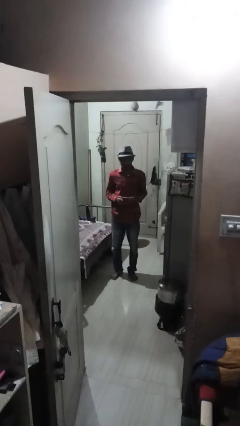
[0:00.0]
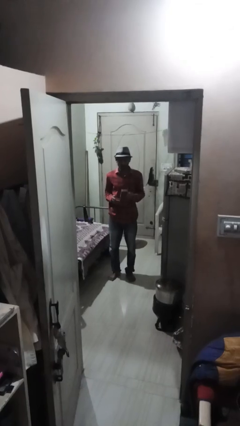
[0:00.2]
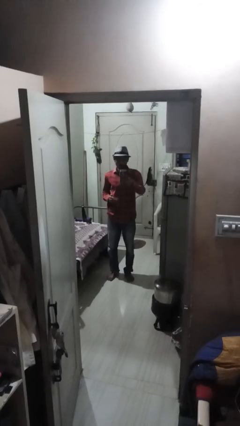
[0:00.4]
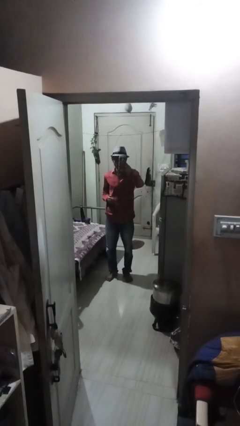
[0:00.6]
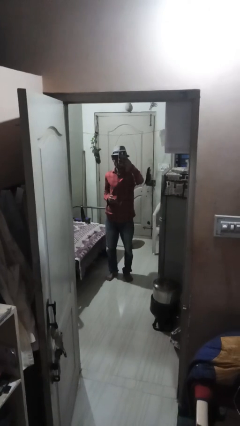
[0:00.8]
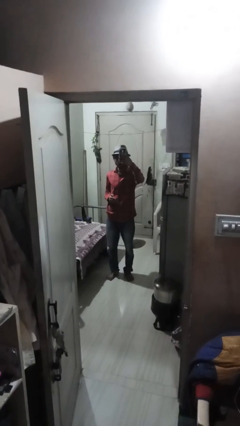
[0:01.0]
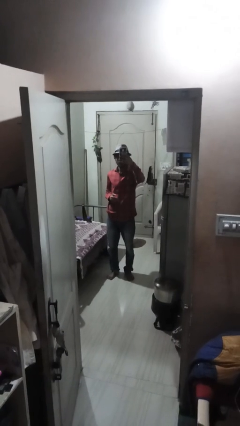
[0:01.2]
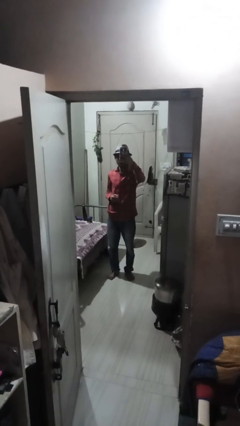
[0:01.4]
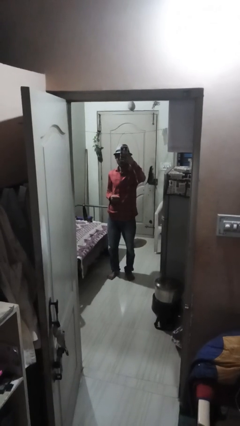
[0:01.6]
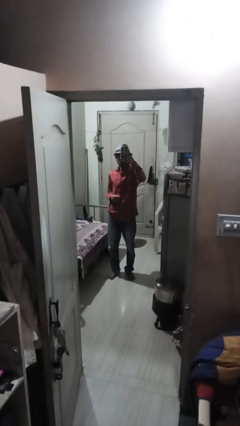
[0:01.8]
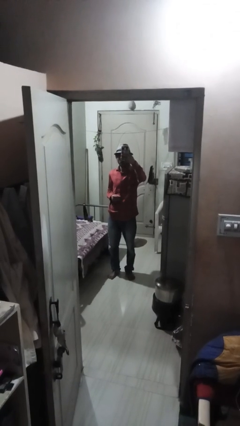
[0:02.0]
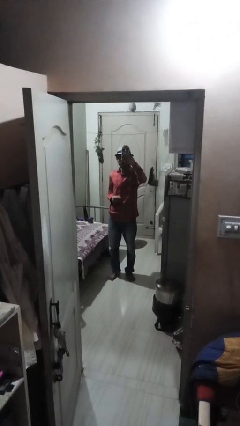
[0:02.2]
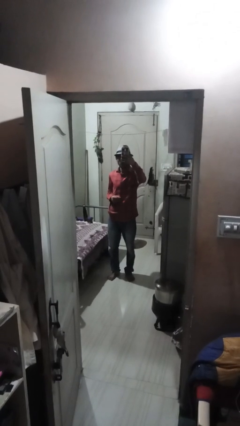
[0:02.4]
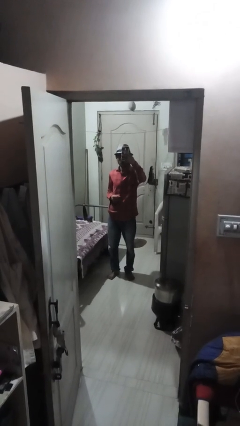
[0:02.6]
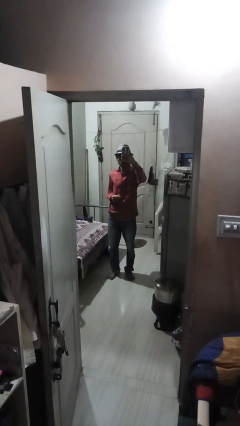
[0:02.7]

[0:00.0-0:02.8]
person takes selfie

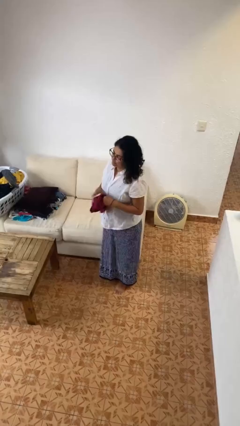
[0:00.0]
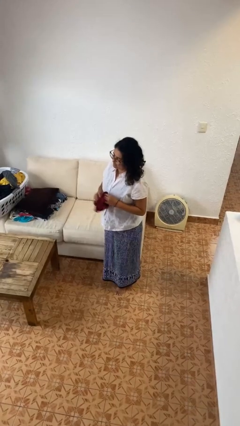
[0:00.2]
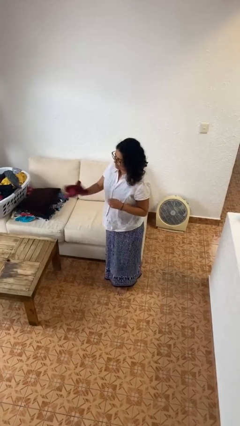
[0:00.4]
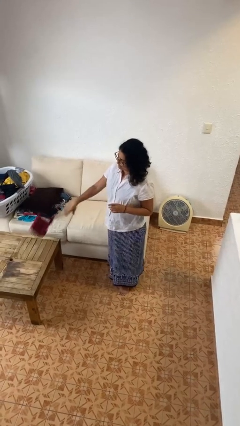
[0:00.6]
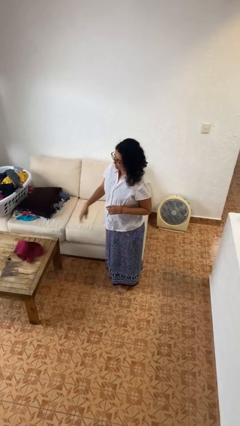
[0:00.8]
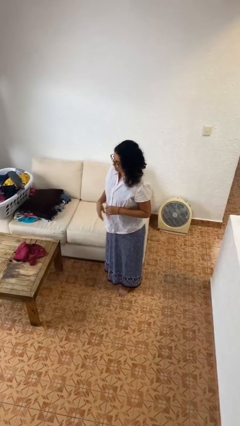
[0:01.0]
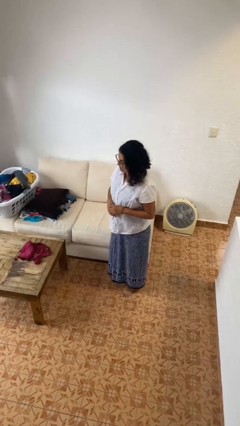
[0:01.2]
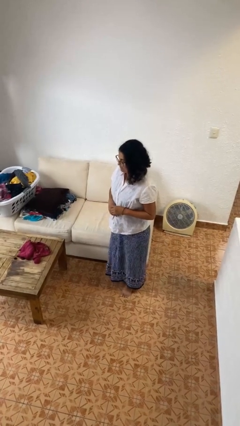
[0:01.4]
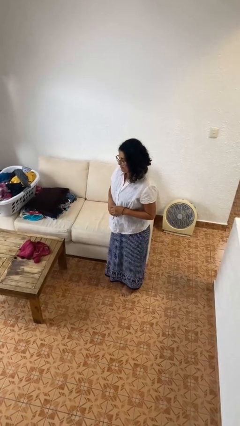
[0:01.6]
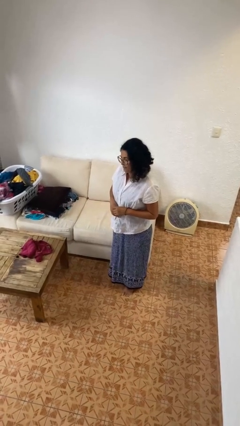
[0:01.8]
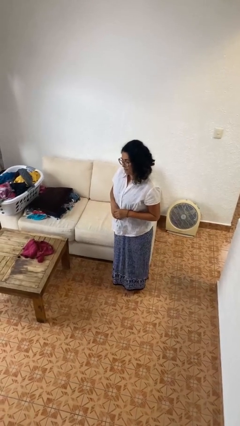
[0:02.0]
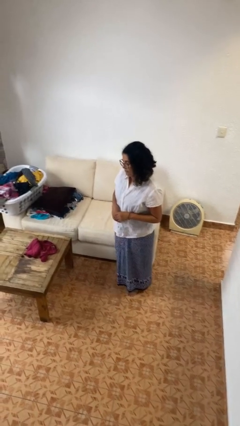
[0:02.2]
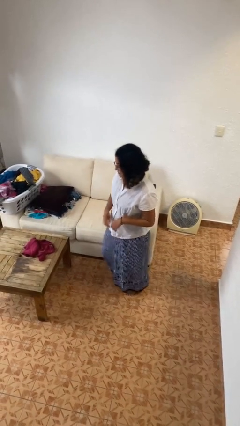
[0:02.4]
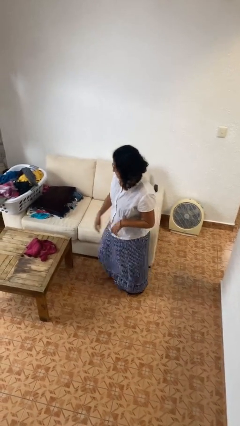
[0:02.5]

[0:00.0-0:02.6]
person throws object on table

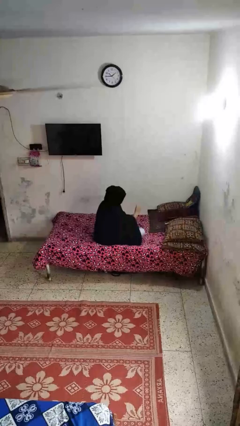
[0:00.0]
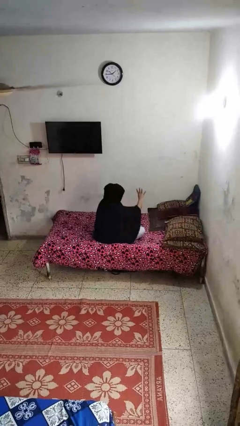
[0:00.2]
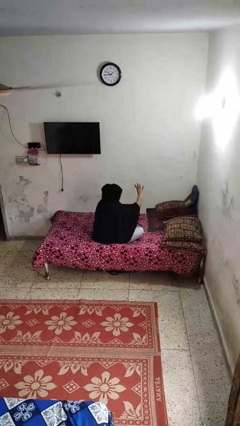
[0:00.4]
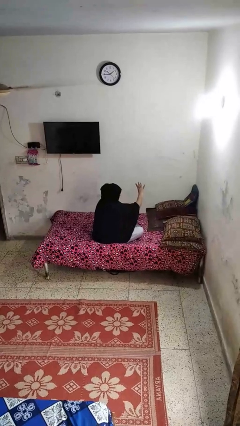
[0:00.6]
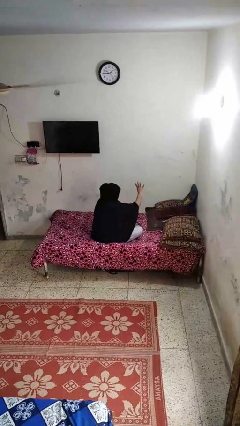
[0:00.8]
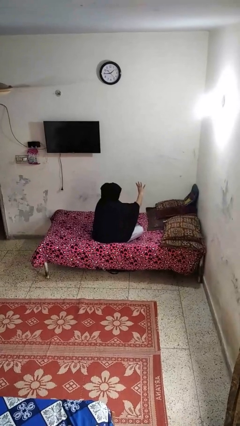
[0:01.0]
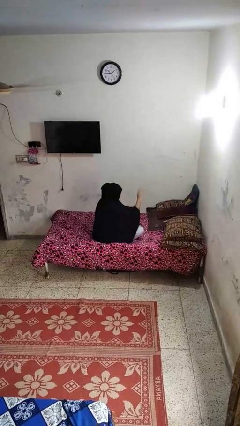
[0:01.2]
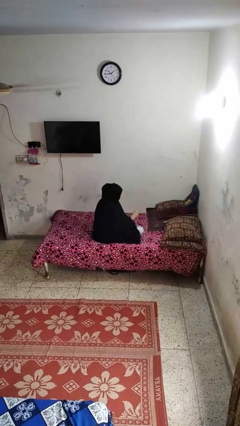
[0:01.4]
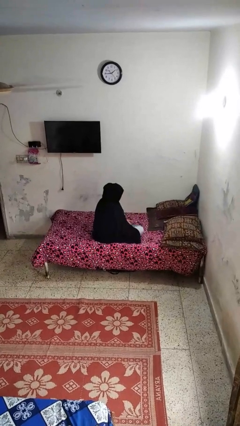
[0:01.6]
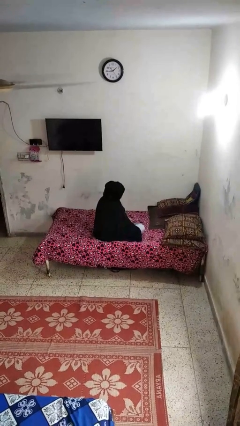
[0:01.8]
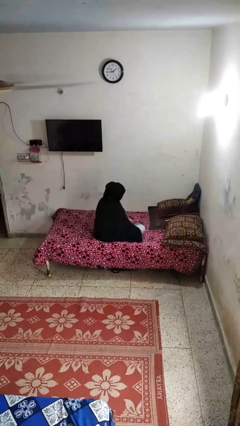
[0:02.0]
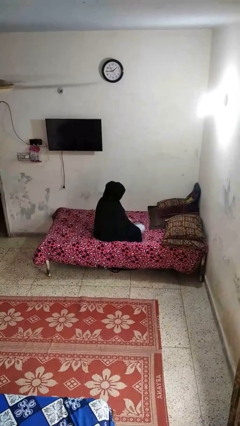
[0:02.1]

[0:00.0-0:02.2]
person gestures number four

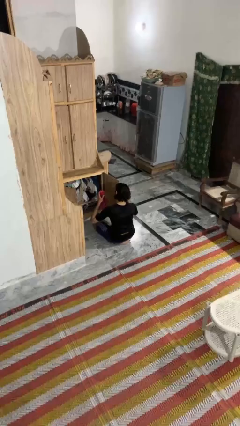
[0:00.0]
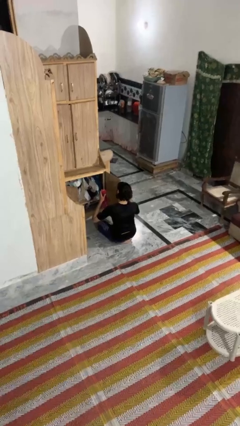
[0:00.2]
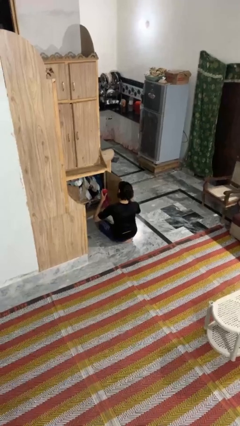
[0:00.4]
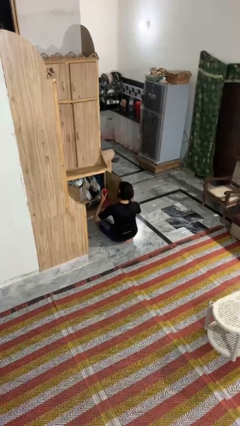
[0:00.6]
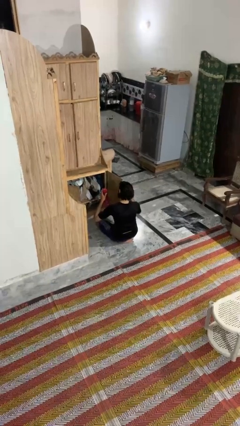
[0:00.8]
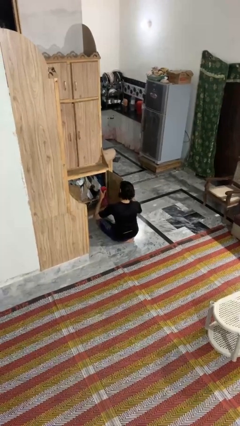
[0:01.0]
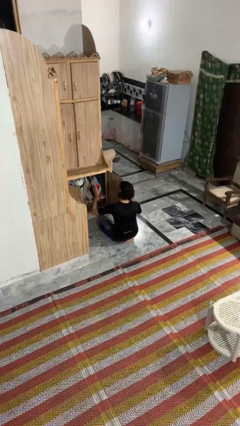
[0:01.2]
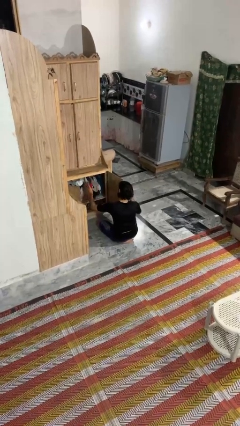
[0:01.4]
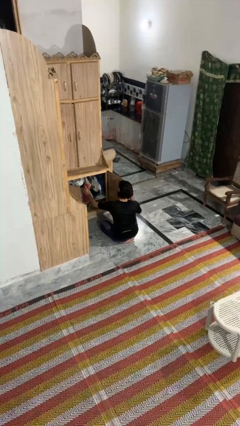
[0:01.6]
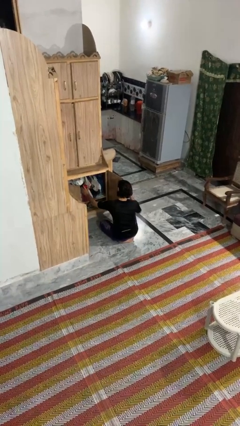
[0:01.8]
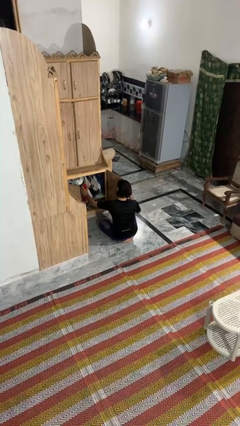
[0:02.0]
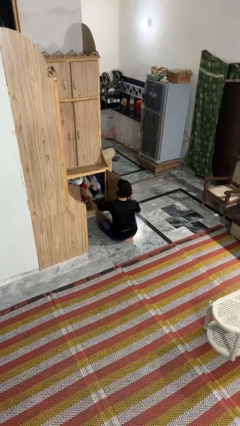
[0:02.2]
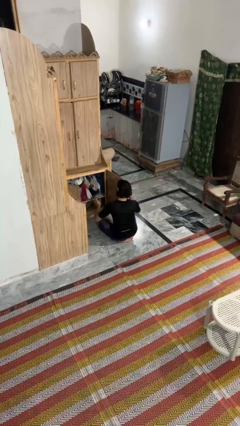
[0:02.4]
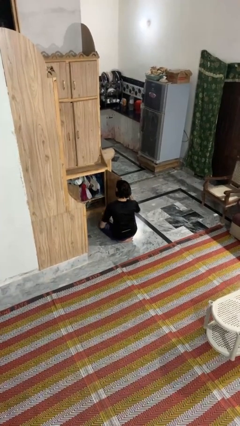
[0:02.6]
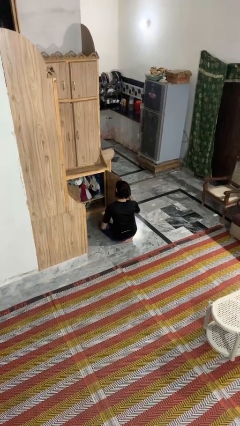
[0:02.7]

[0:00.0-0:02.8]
person puts down object into cabinet

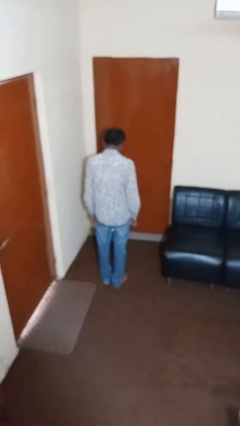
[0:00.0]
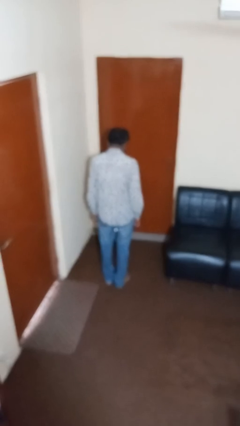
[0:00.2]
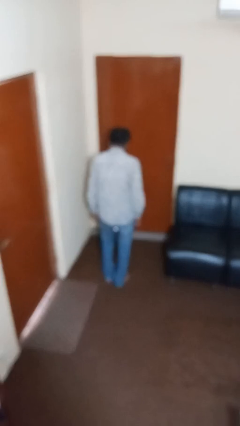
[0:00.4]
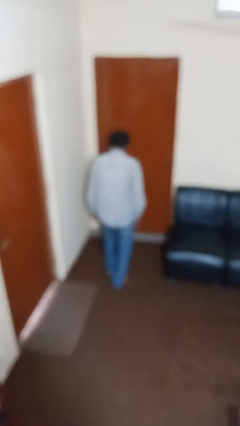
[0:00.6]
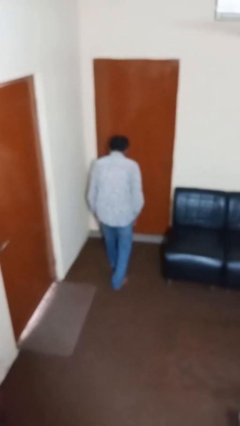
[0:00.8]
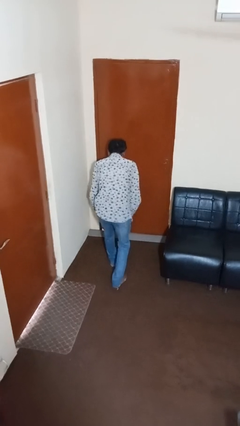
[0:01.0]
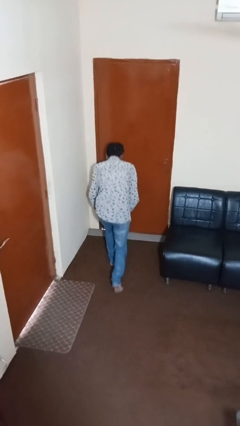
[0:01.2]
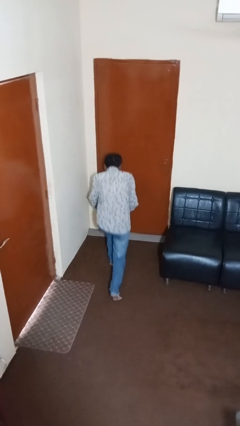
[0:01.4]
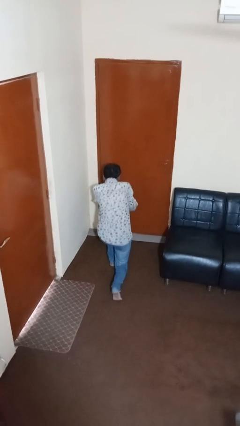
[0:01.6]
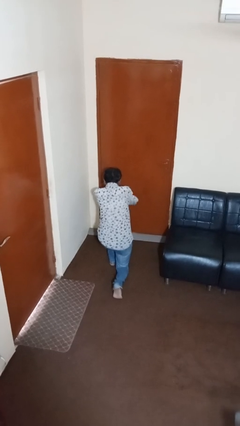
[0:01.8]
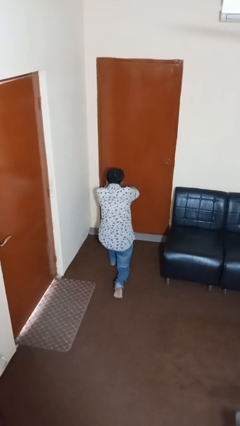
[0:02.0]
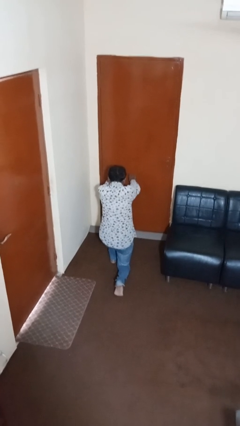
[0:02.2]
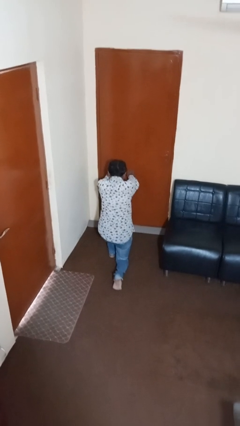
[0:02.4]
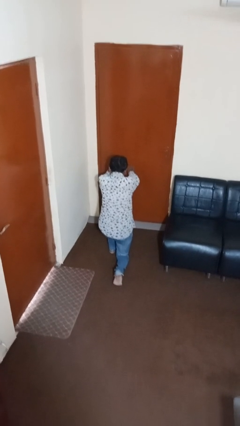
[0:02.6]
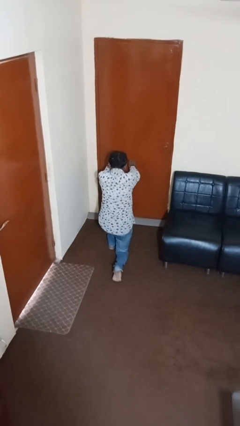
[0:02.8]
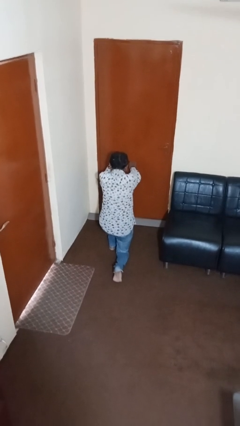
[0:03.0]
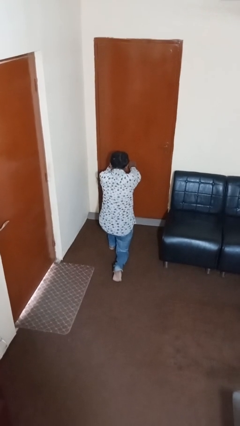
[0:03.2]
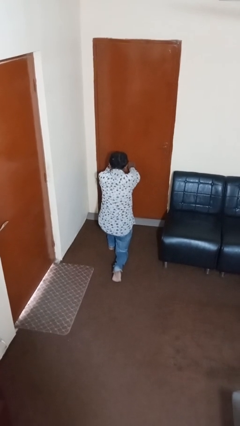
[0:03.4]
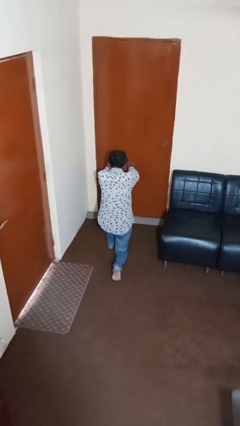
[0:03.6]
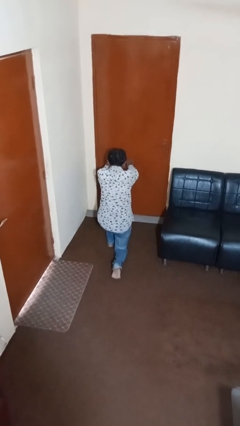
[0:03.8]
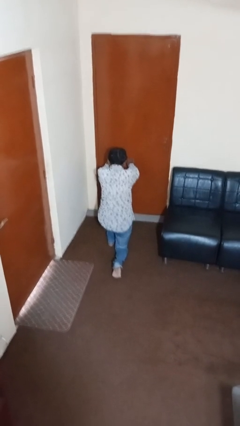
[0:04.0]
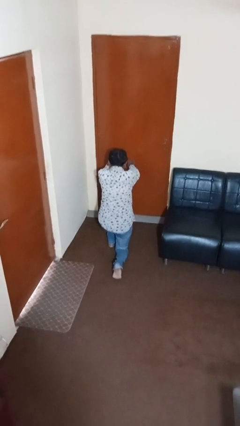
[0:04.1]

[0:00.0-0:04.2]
person exercises with lunges

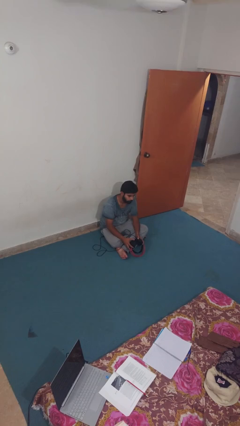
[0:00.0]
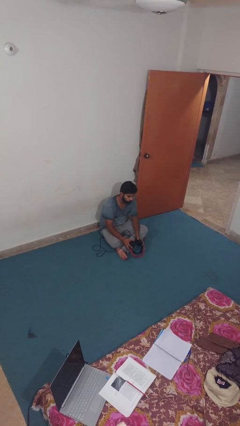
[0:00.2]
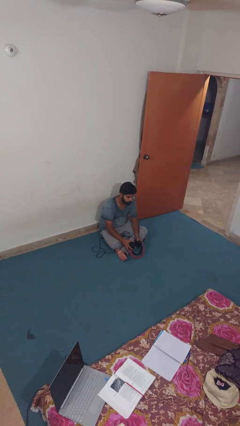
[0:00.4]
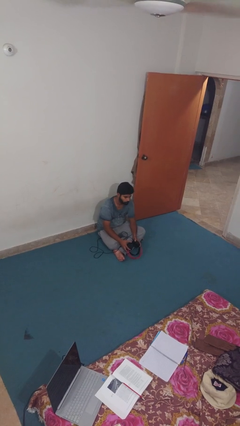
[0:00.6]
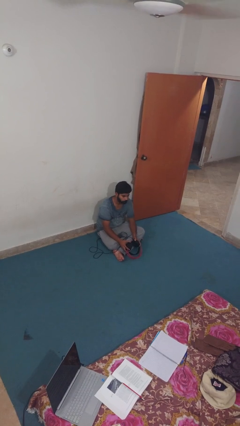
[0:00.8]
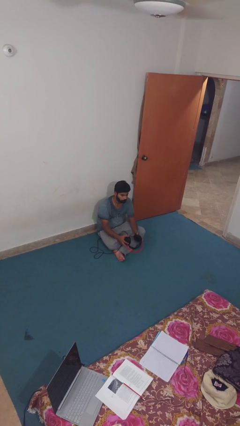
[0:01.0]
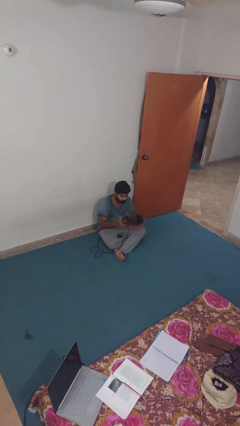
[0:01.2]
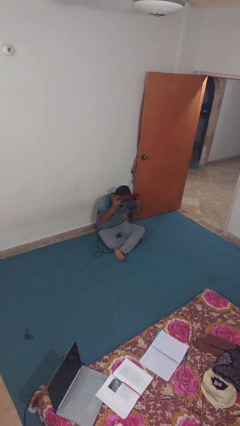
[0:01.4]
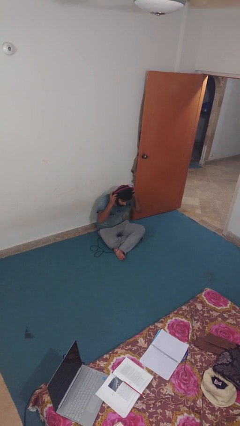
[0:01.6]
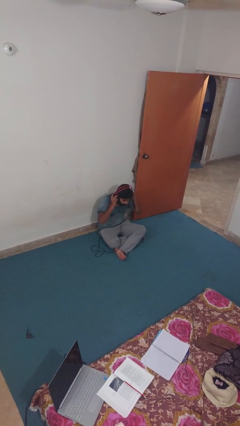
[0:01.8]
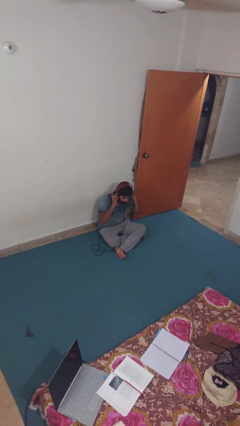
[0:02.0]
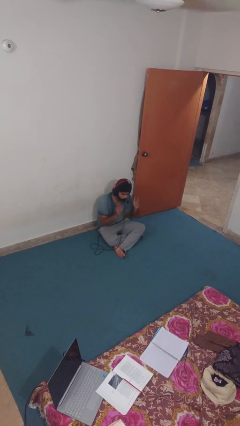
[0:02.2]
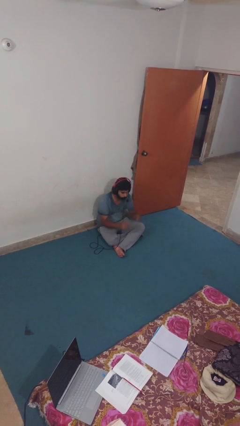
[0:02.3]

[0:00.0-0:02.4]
person puts on headphones

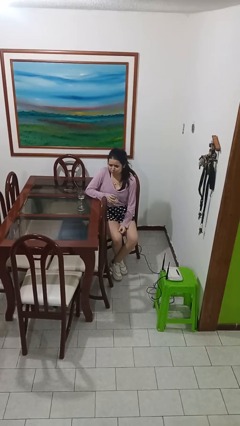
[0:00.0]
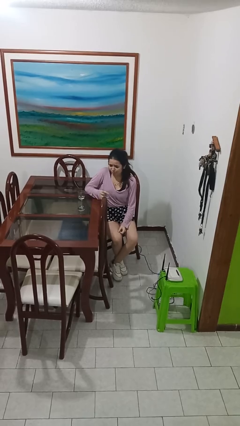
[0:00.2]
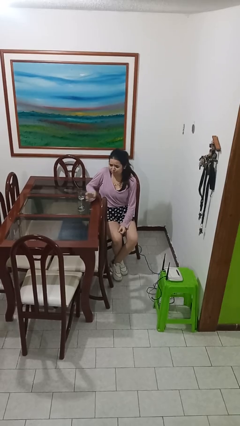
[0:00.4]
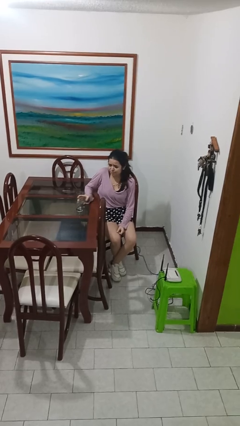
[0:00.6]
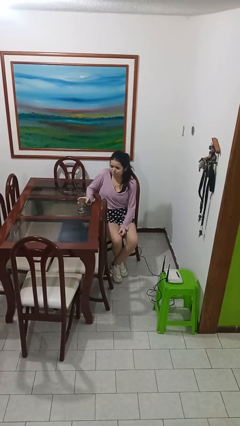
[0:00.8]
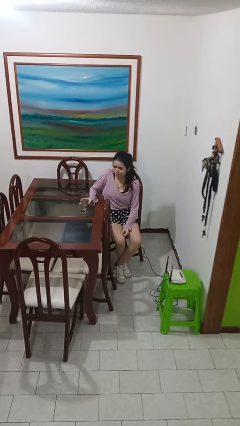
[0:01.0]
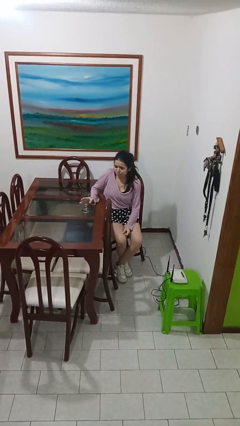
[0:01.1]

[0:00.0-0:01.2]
person puts down object on table
